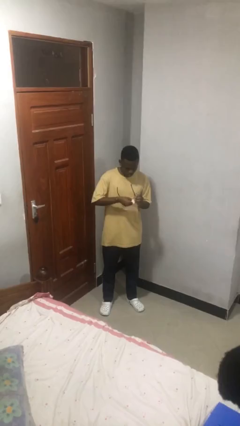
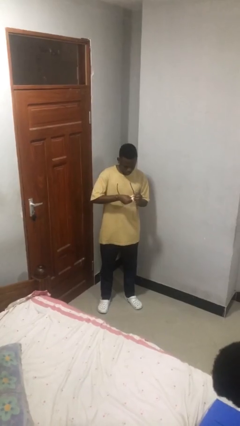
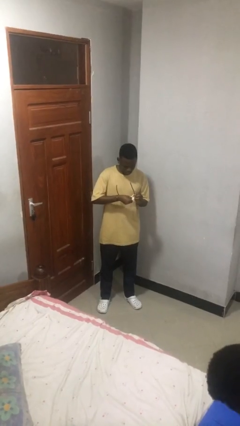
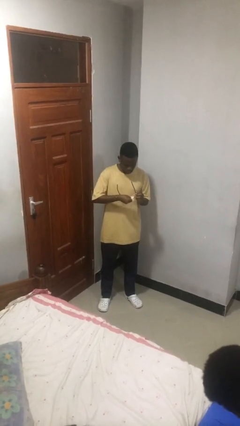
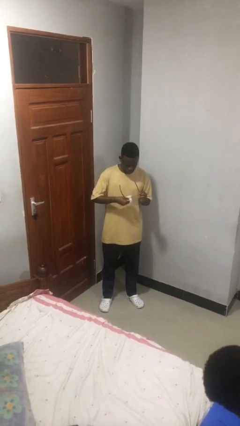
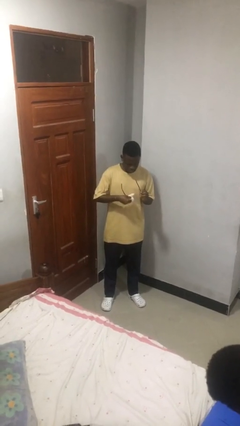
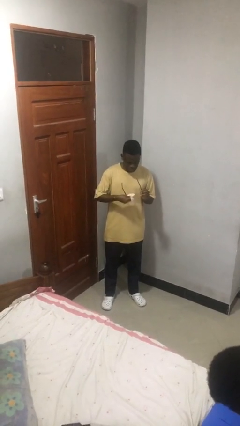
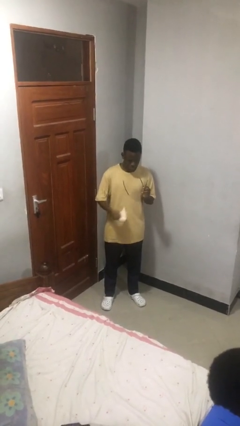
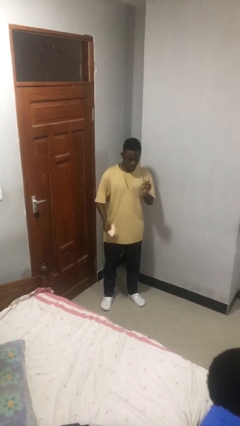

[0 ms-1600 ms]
person cleans eyeglasses

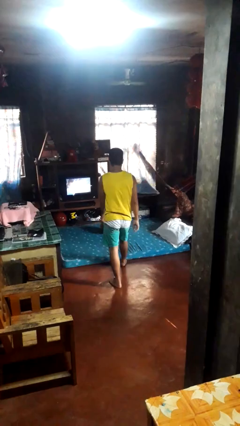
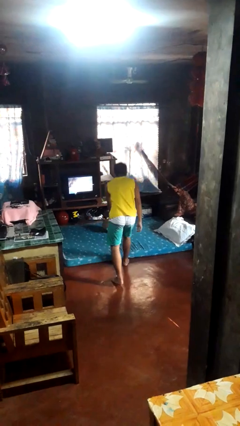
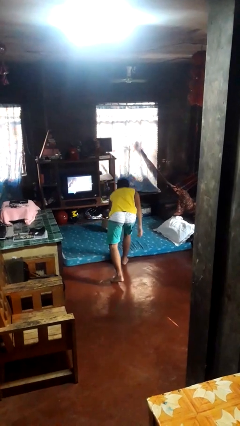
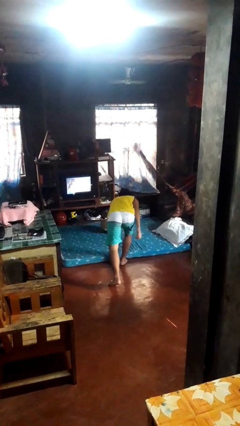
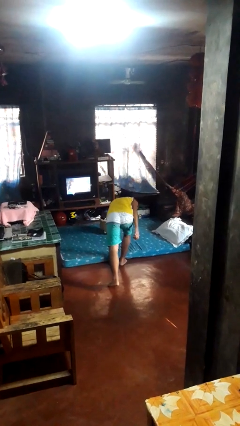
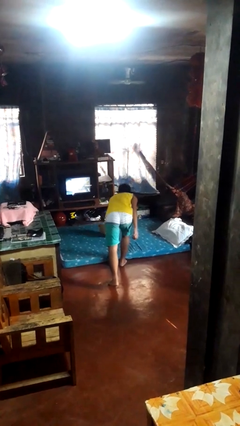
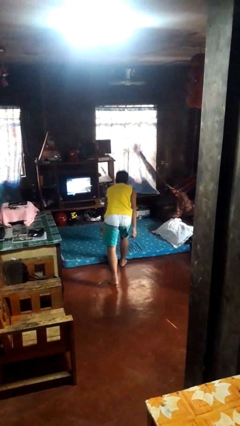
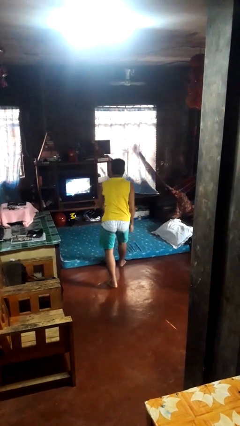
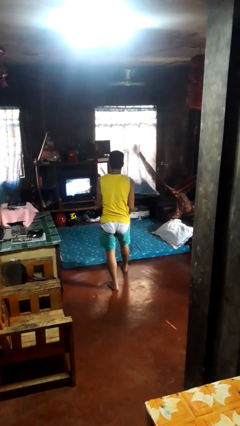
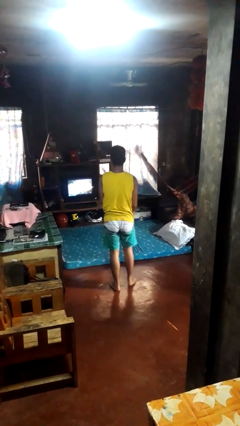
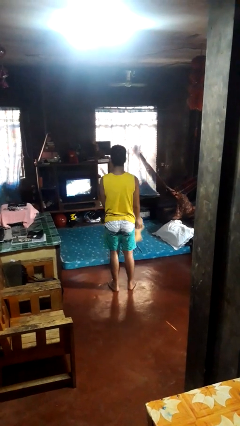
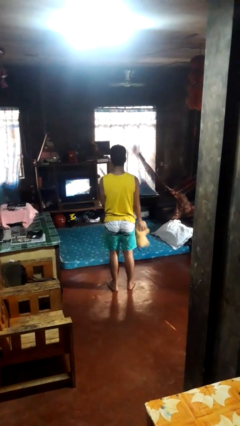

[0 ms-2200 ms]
person picks up object from bed

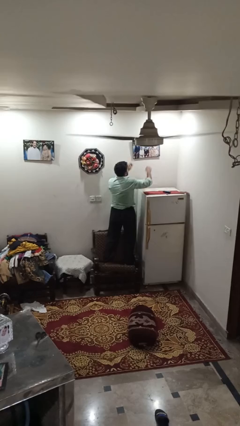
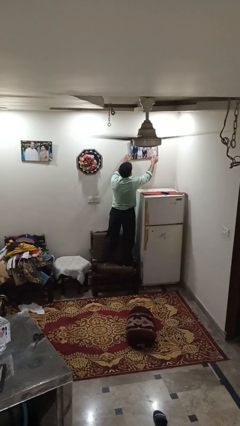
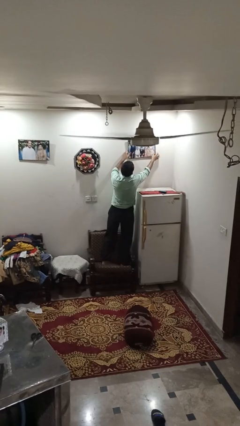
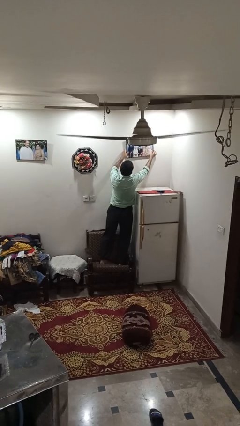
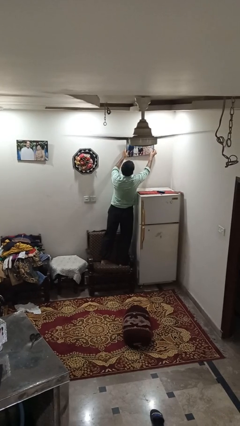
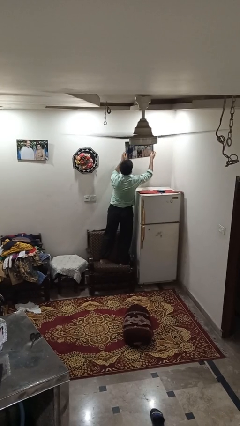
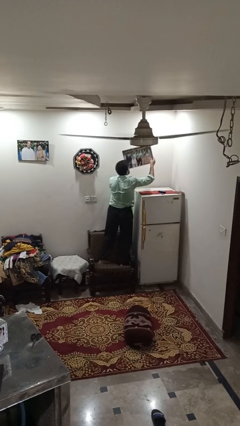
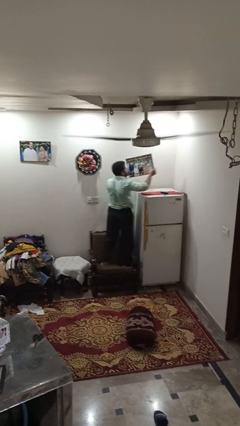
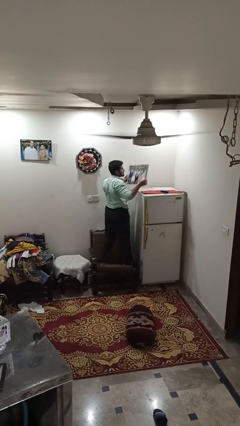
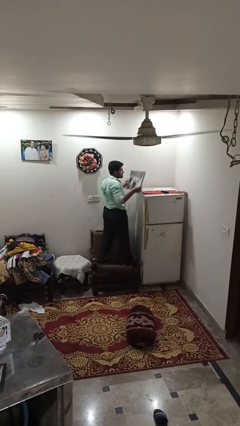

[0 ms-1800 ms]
person takes down picture frame

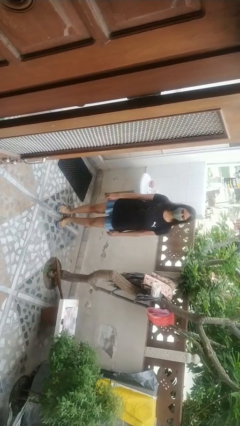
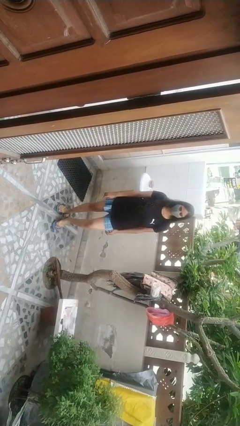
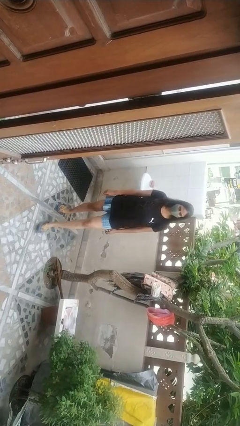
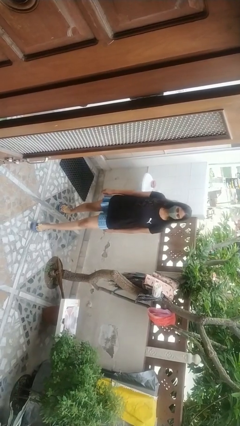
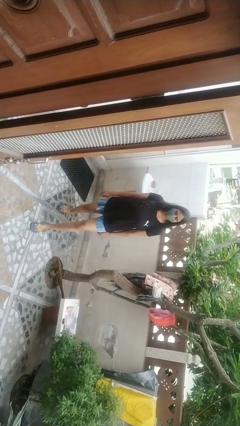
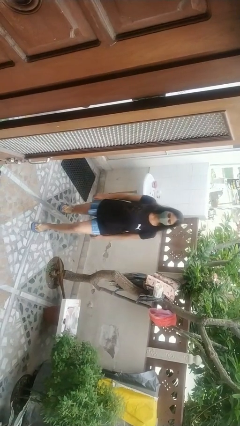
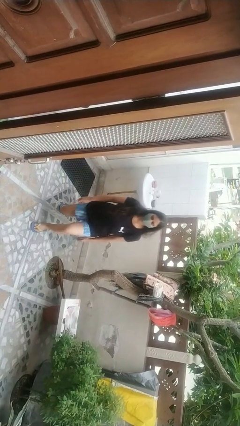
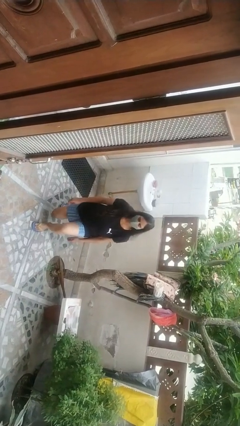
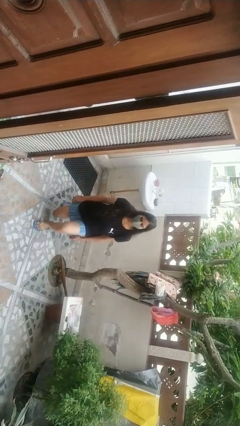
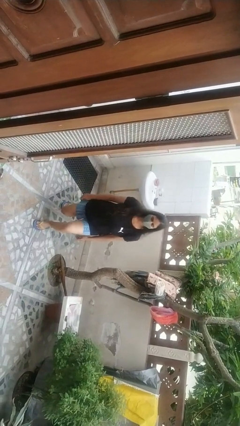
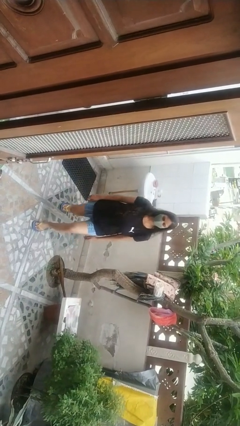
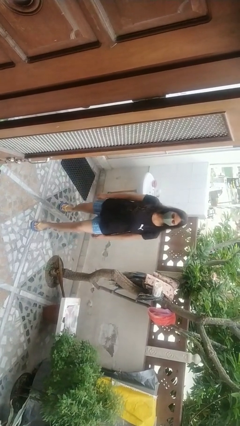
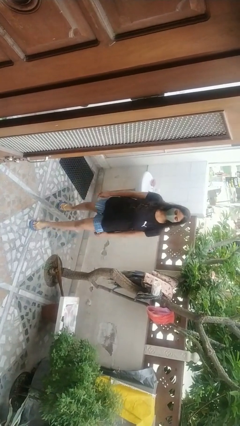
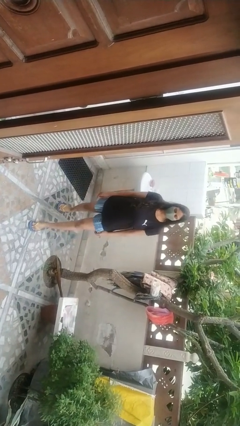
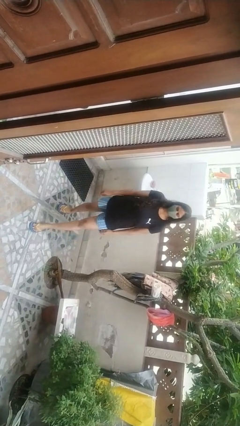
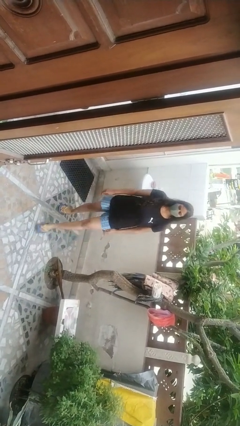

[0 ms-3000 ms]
person exercises with lunges

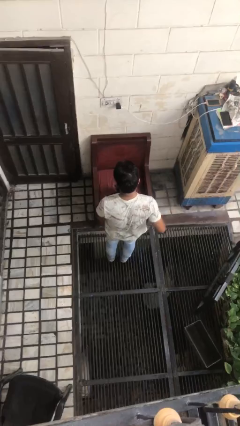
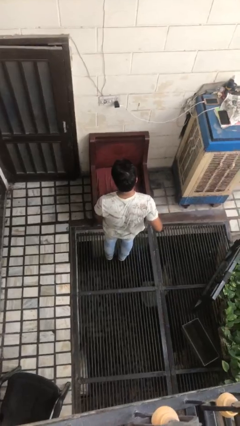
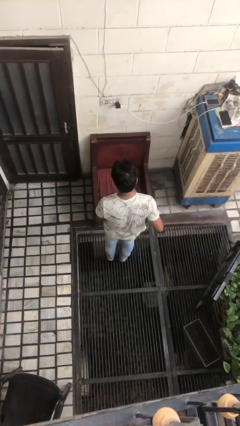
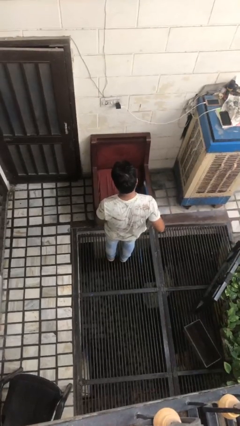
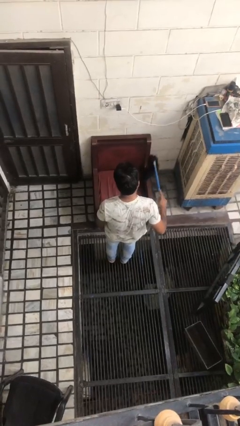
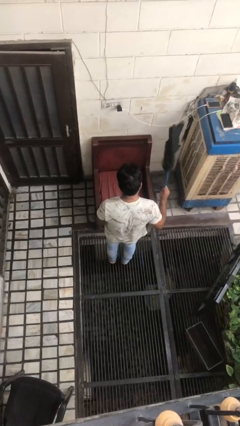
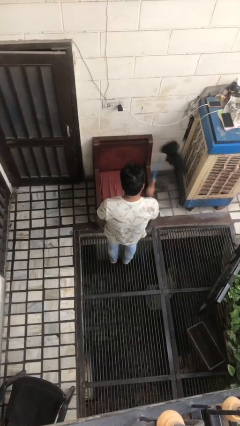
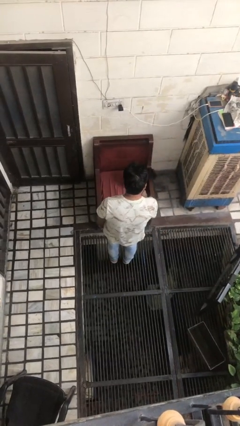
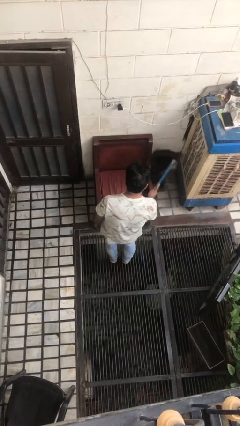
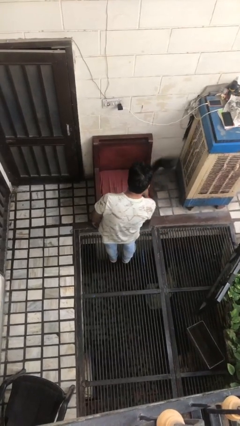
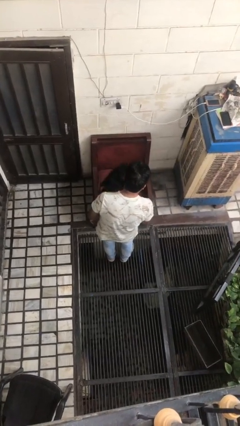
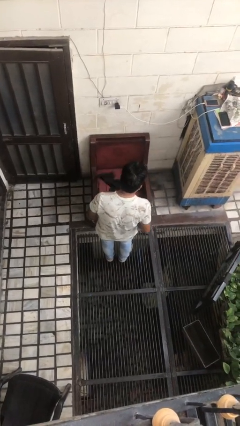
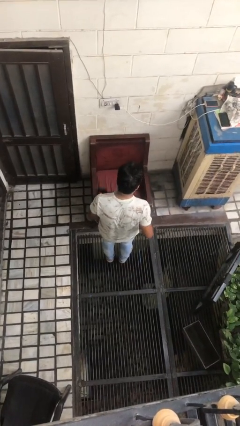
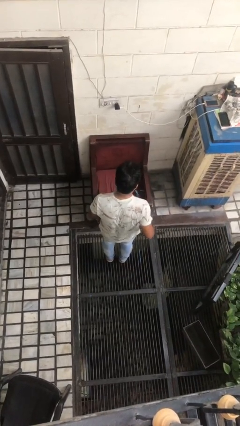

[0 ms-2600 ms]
person dusts furniture

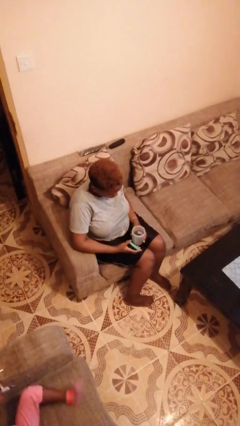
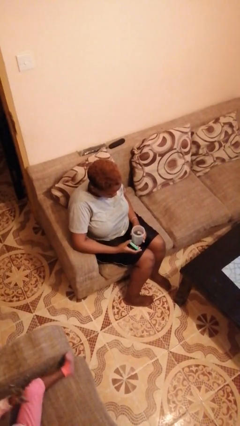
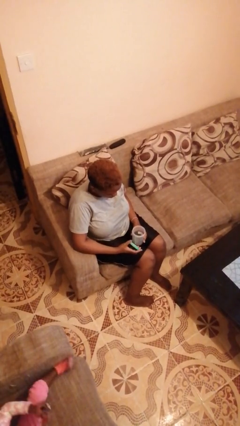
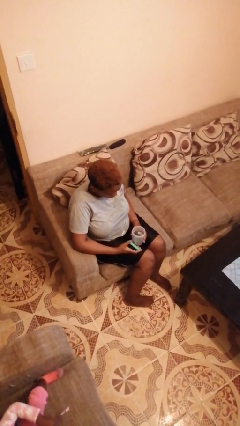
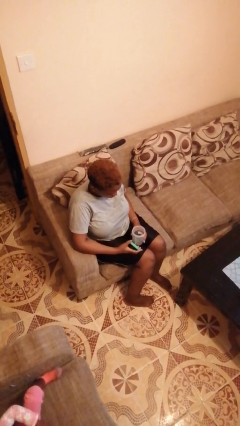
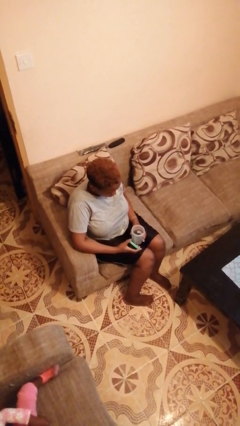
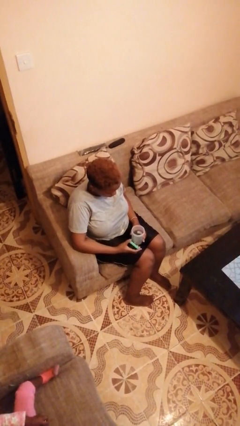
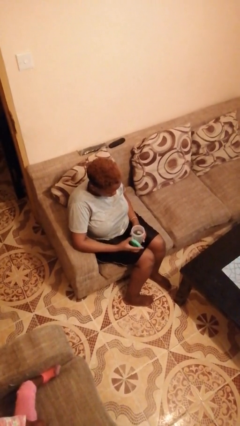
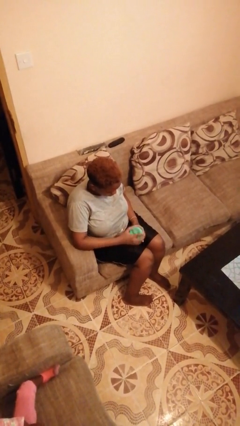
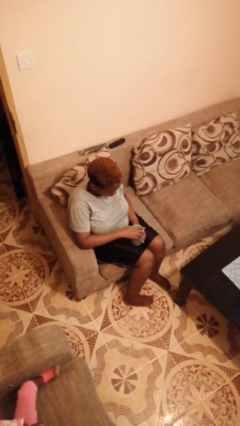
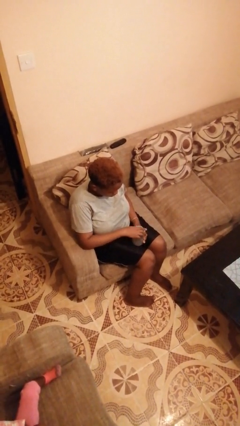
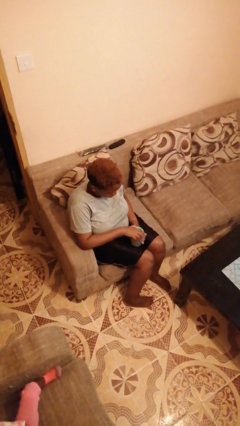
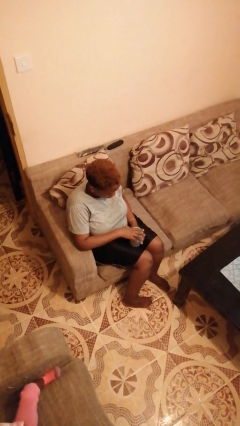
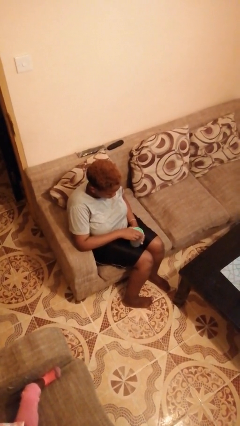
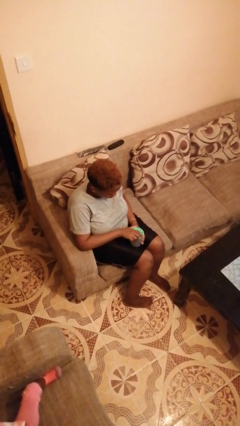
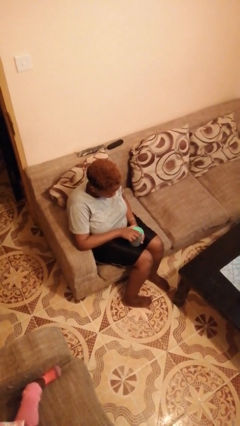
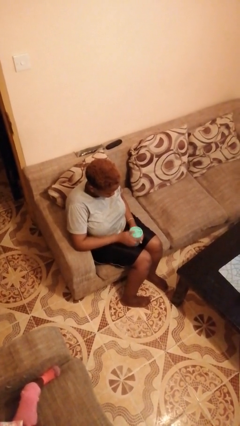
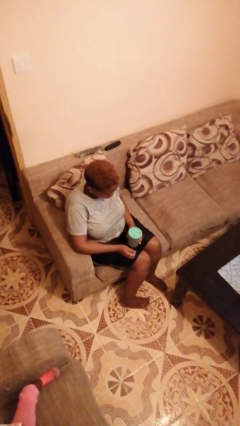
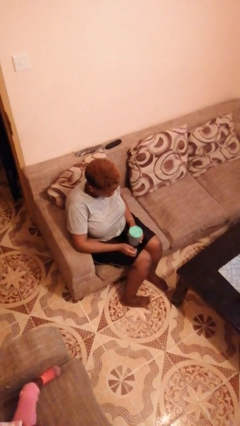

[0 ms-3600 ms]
person closes jar

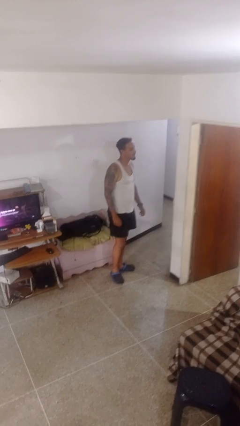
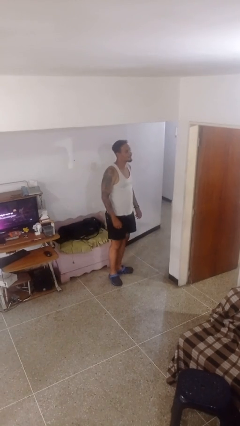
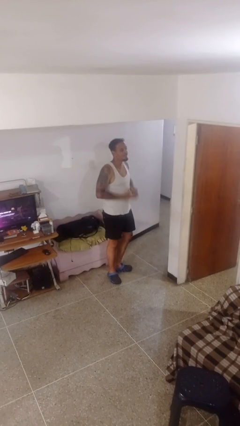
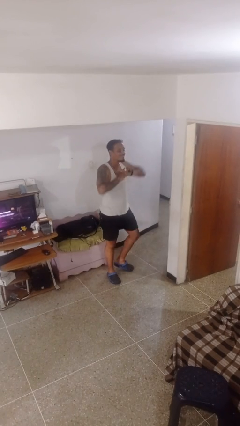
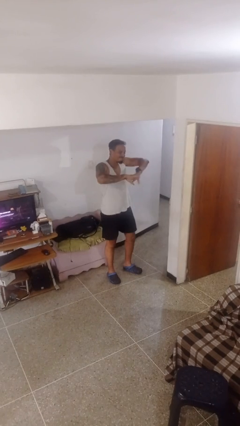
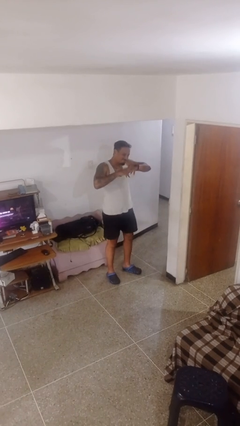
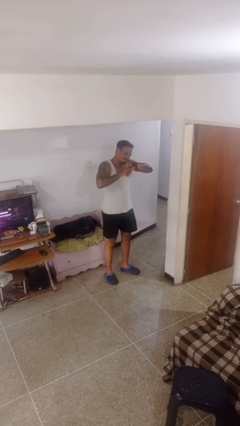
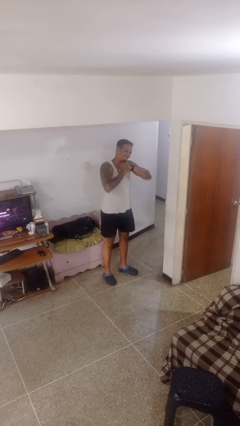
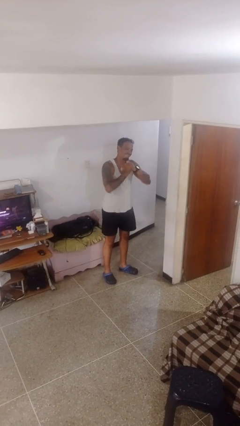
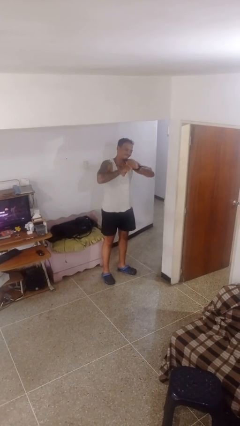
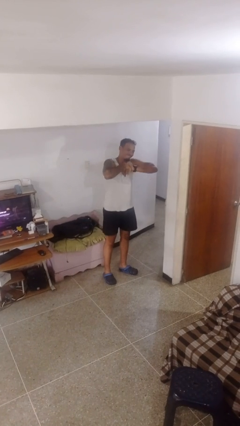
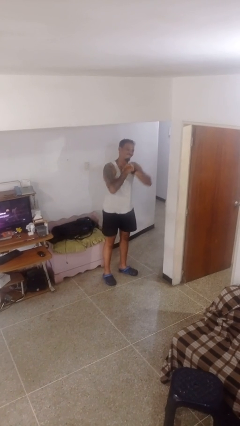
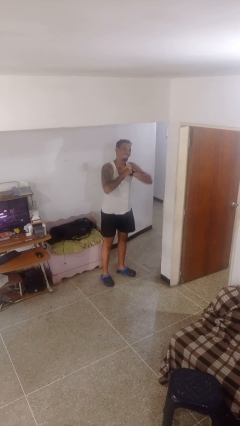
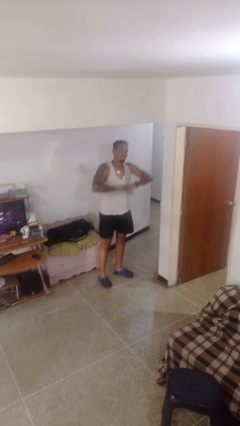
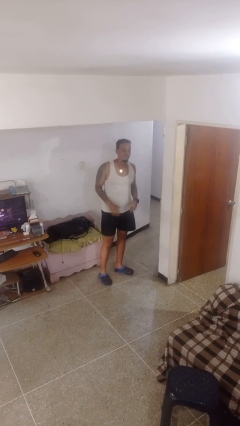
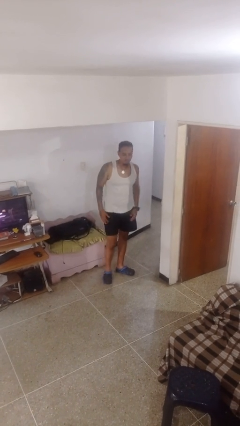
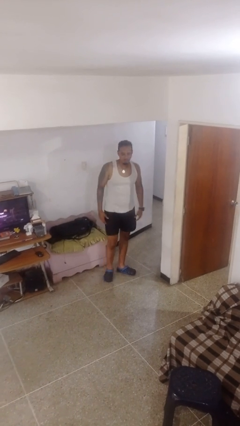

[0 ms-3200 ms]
person cracks knuckles
